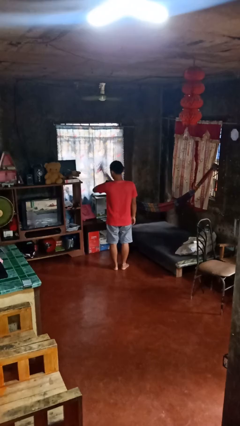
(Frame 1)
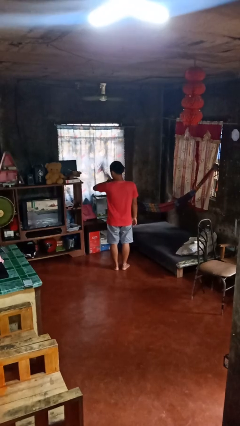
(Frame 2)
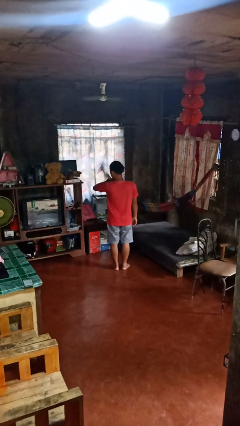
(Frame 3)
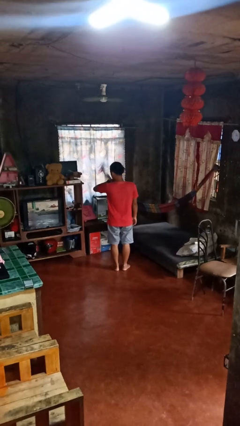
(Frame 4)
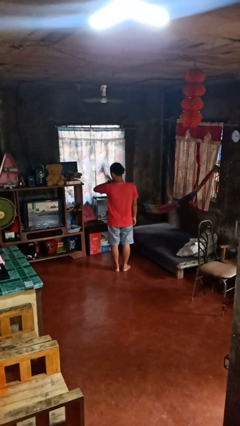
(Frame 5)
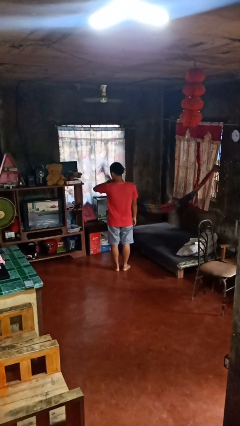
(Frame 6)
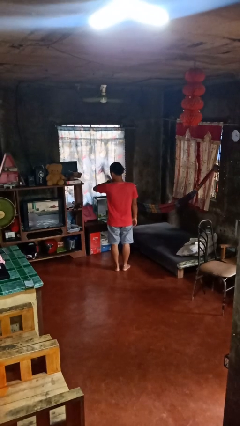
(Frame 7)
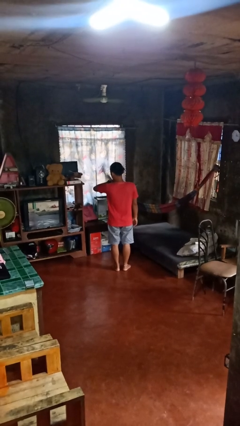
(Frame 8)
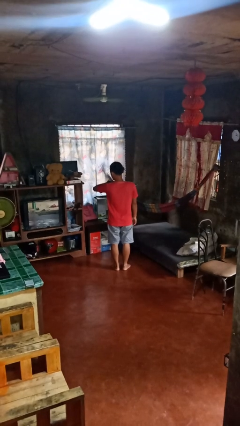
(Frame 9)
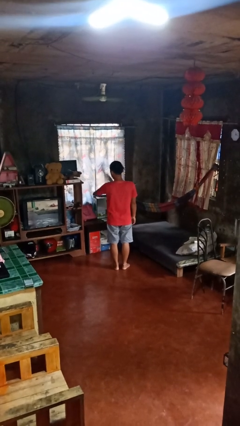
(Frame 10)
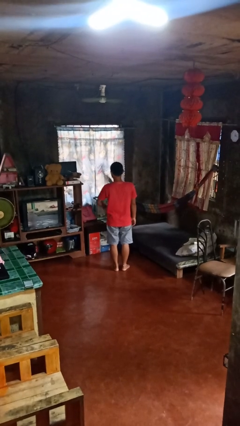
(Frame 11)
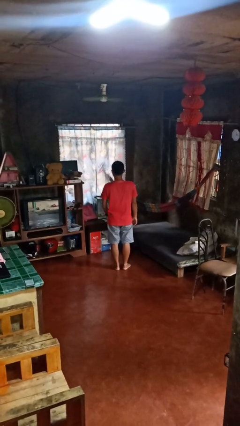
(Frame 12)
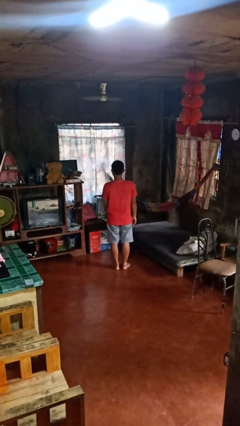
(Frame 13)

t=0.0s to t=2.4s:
person looks at wristwatch

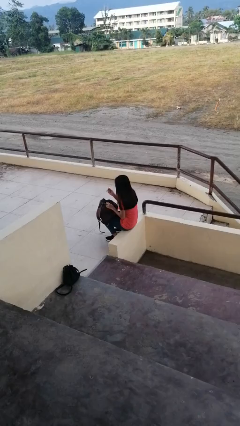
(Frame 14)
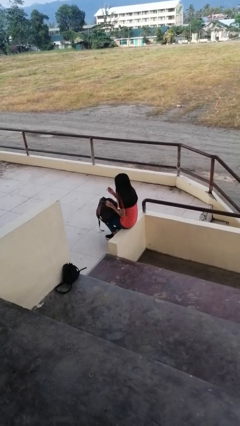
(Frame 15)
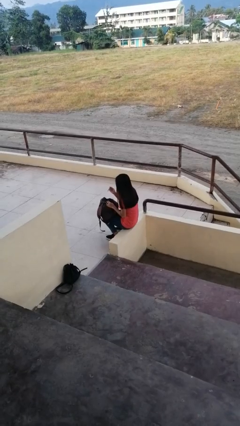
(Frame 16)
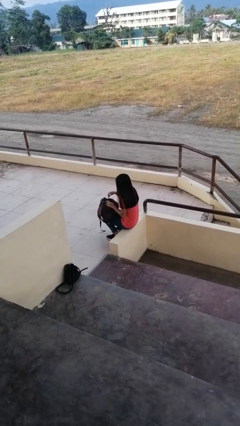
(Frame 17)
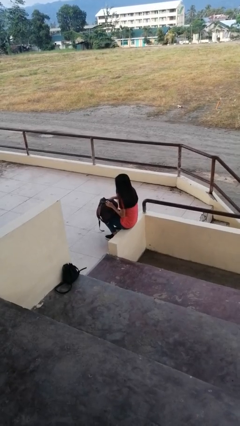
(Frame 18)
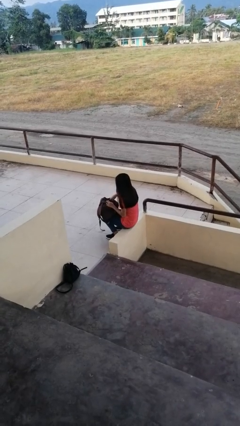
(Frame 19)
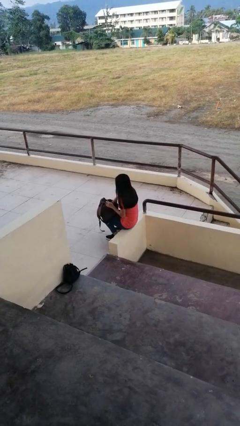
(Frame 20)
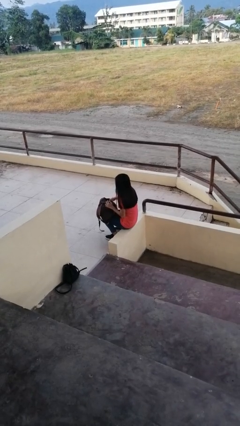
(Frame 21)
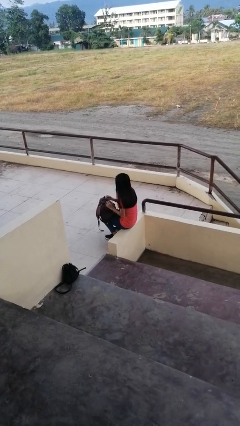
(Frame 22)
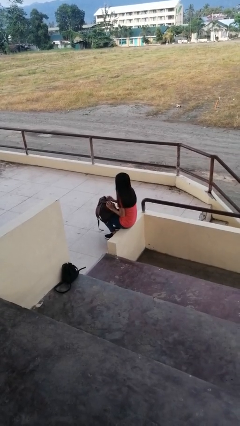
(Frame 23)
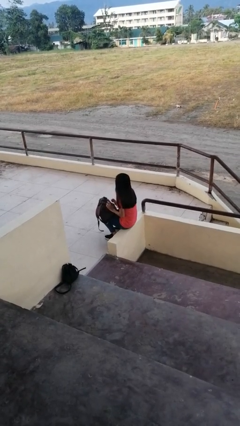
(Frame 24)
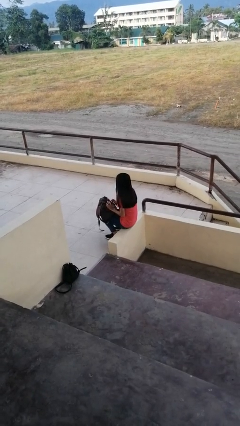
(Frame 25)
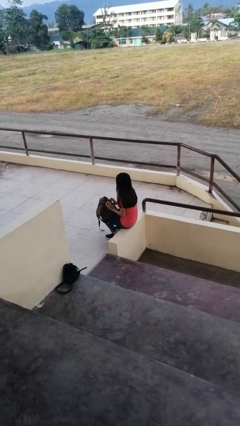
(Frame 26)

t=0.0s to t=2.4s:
person puts object into backpack

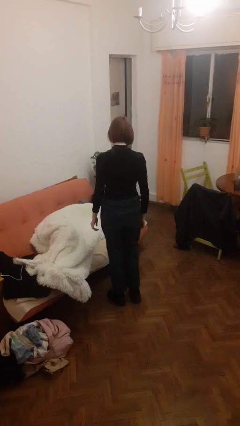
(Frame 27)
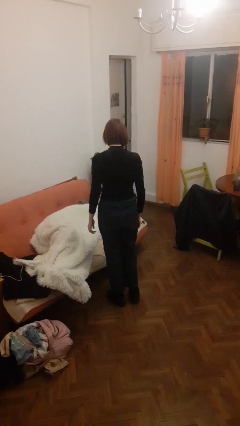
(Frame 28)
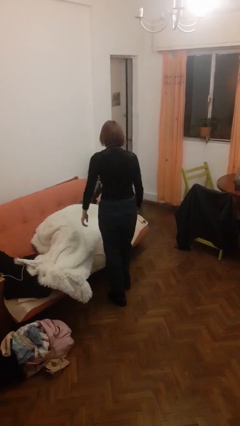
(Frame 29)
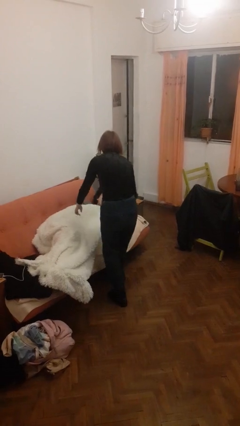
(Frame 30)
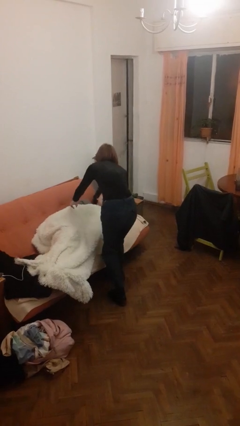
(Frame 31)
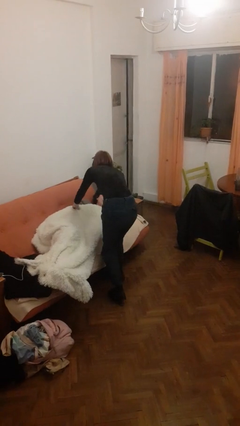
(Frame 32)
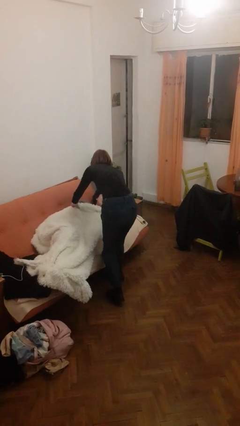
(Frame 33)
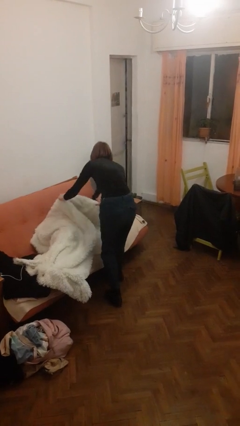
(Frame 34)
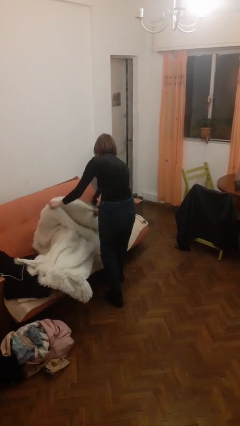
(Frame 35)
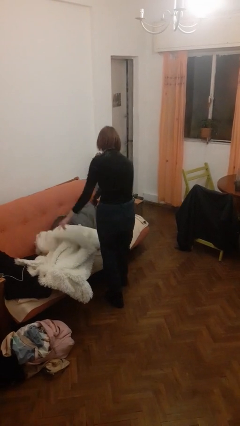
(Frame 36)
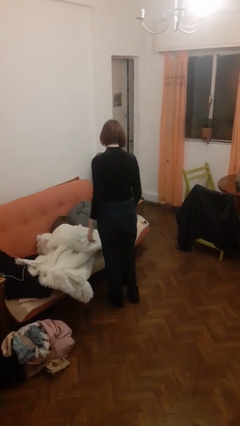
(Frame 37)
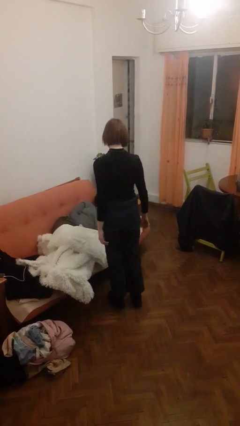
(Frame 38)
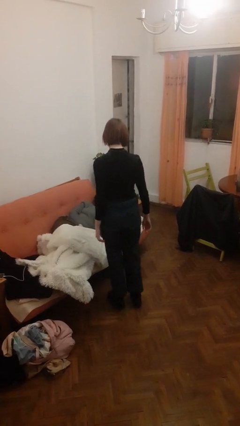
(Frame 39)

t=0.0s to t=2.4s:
person uncovers friend with blanket

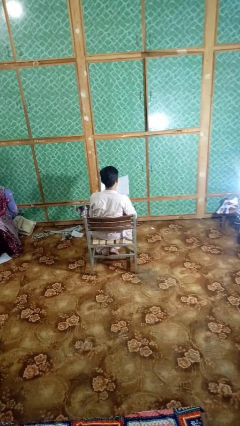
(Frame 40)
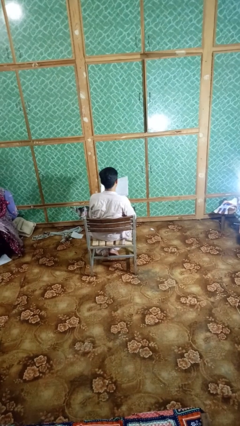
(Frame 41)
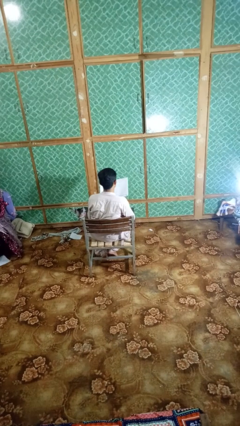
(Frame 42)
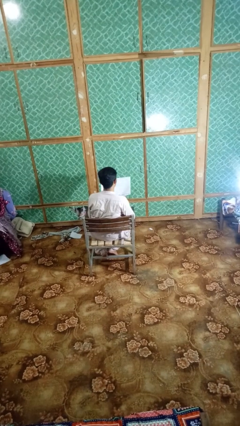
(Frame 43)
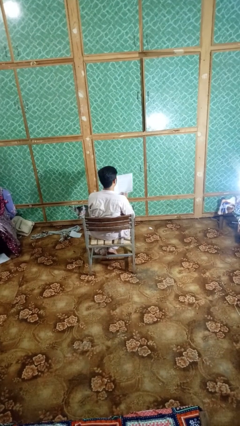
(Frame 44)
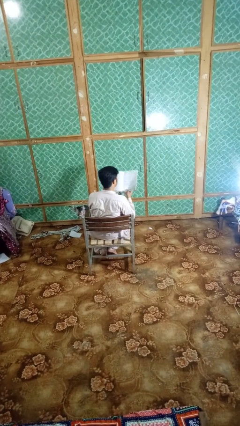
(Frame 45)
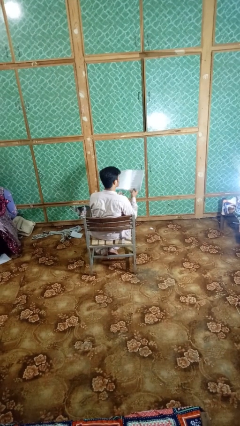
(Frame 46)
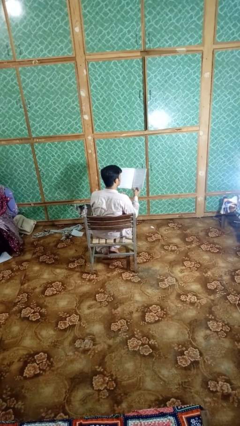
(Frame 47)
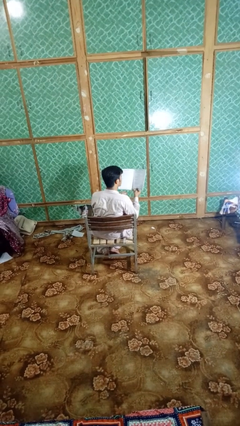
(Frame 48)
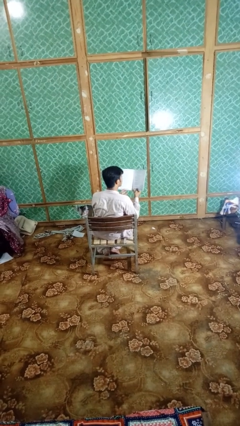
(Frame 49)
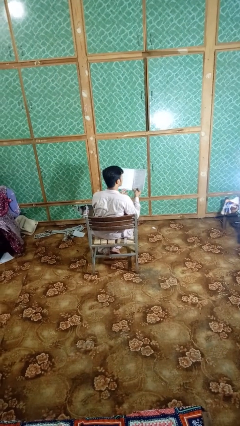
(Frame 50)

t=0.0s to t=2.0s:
person reads magazine

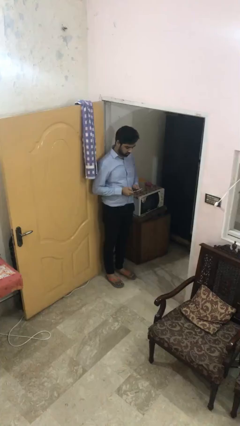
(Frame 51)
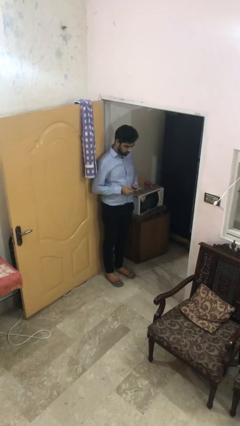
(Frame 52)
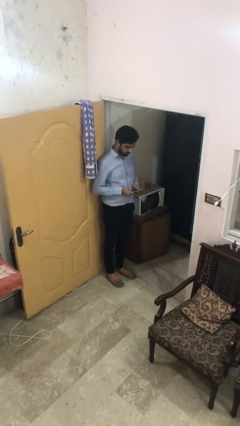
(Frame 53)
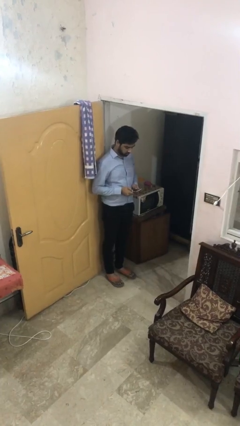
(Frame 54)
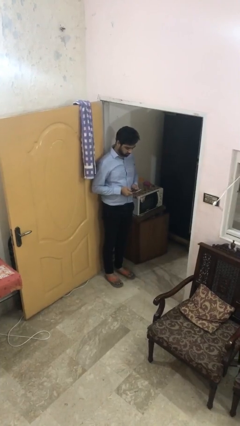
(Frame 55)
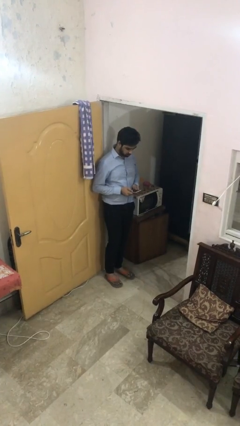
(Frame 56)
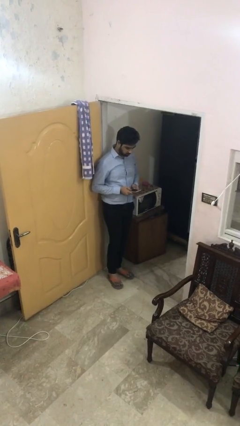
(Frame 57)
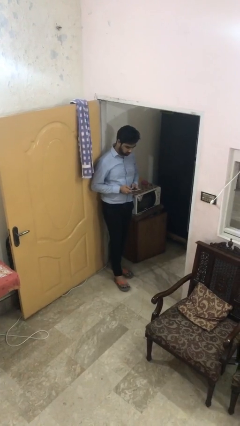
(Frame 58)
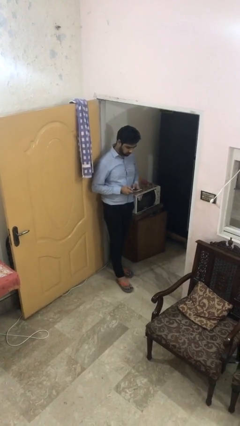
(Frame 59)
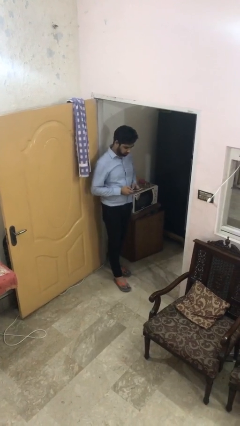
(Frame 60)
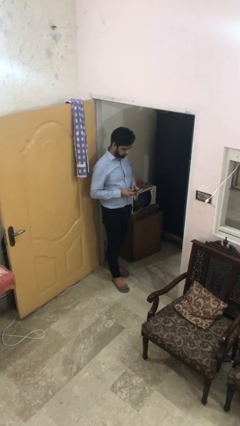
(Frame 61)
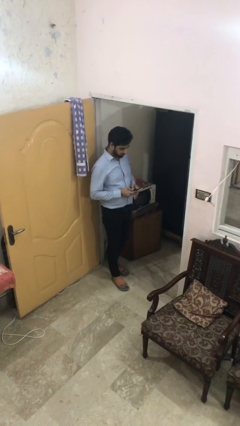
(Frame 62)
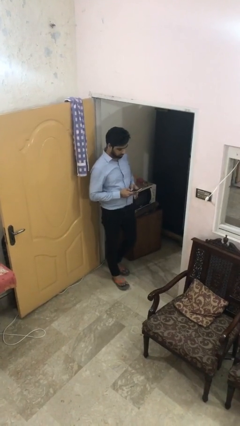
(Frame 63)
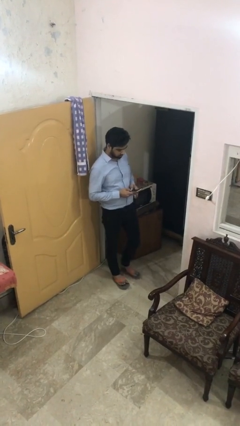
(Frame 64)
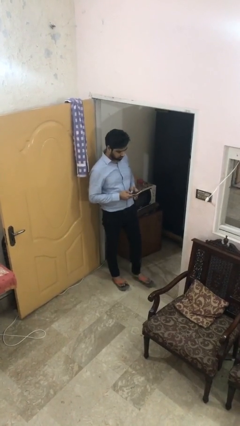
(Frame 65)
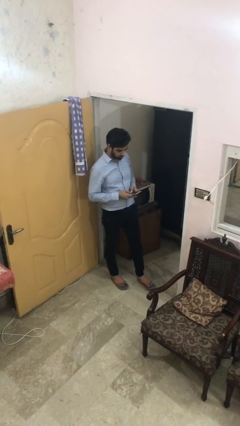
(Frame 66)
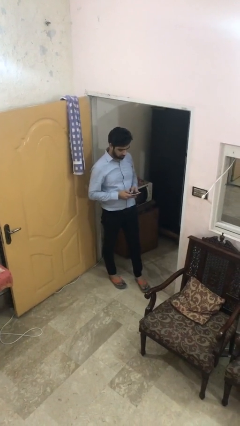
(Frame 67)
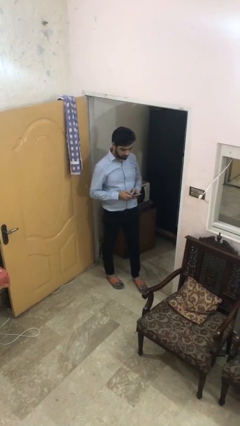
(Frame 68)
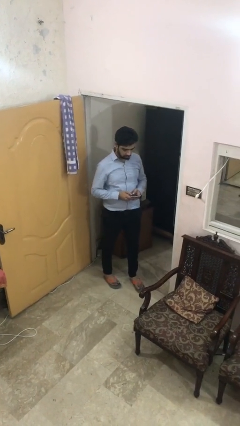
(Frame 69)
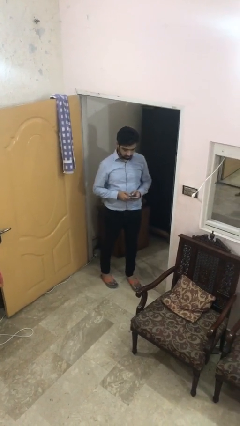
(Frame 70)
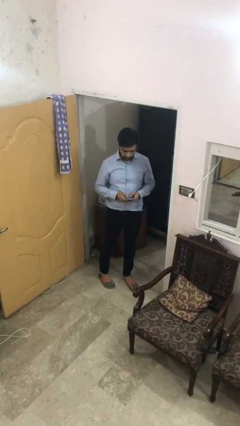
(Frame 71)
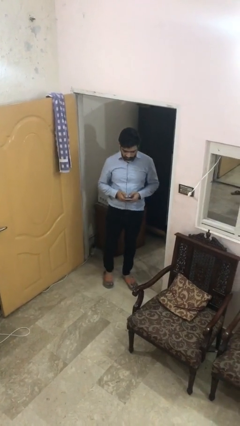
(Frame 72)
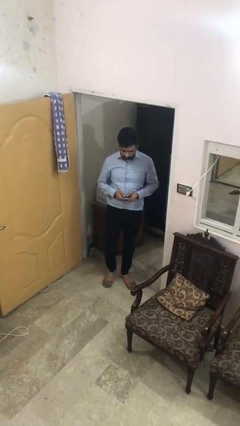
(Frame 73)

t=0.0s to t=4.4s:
person texts on phone

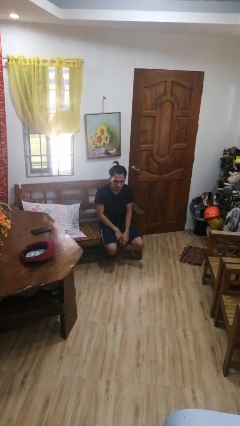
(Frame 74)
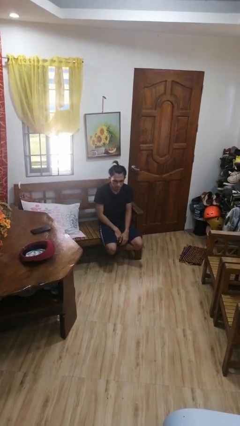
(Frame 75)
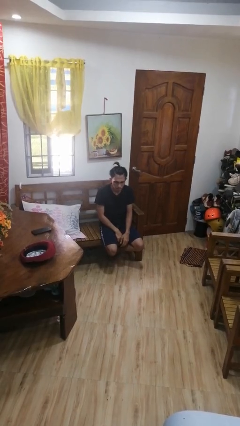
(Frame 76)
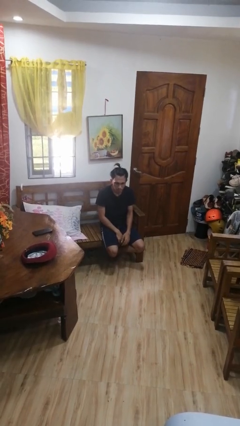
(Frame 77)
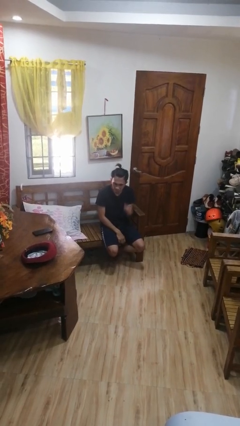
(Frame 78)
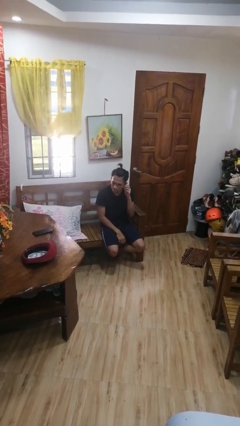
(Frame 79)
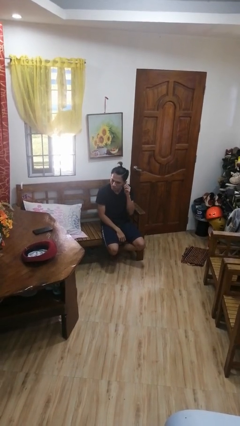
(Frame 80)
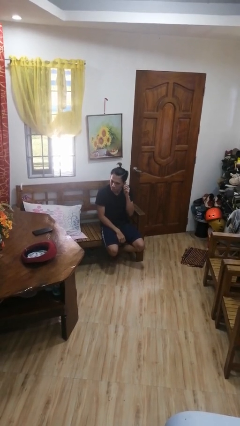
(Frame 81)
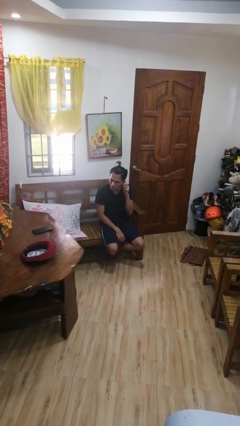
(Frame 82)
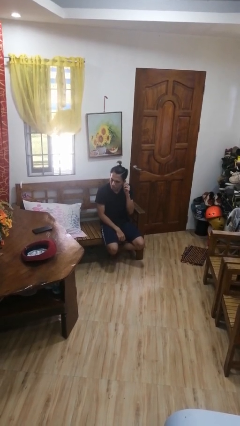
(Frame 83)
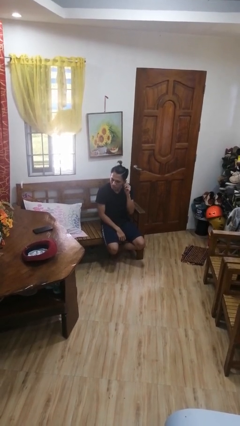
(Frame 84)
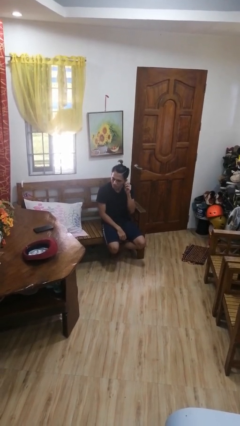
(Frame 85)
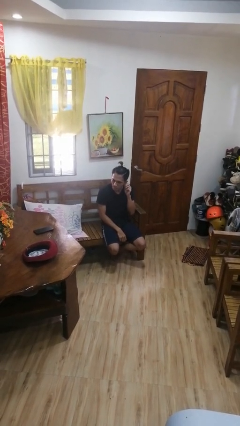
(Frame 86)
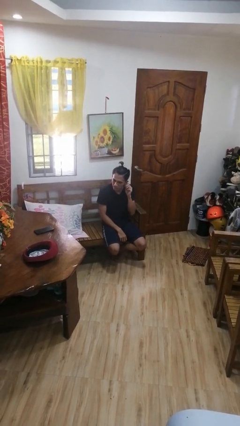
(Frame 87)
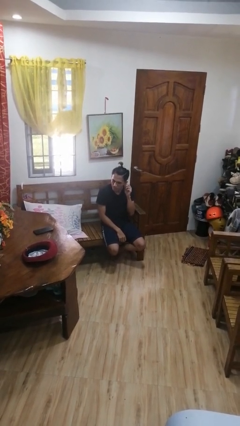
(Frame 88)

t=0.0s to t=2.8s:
person touches earlobe

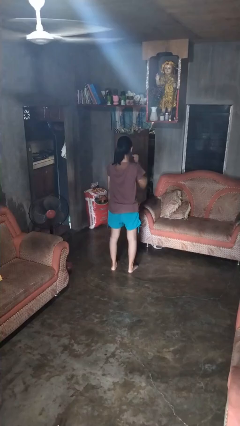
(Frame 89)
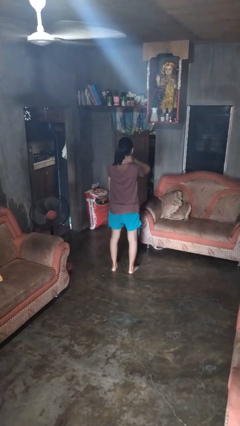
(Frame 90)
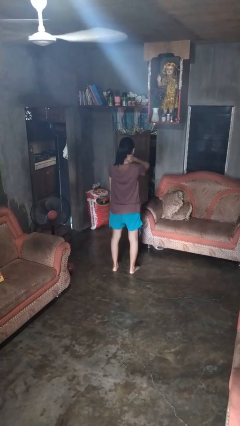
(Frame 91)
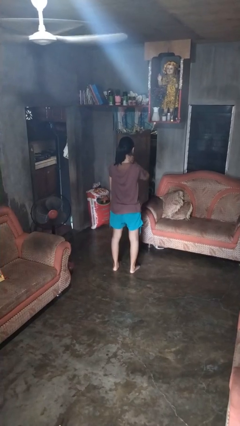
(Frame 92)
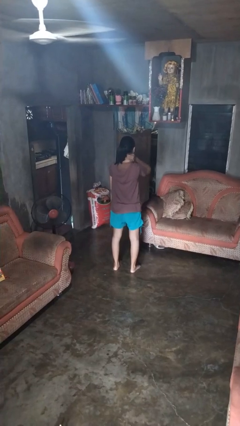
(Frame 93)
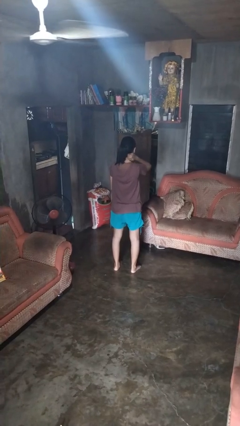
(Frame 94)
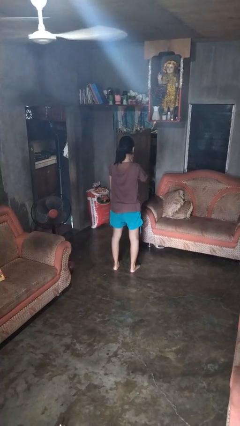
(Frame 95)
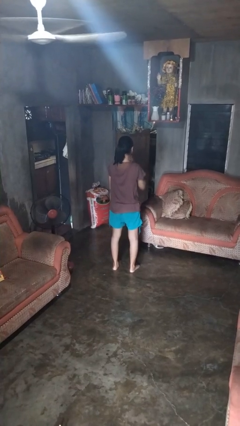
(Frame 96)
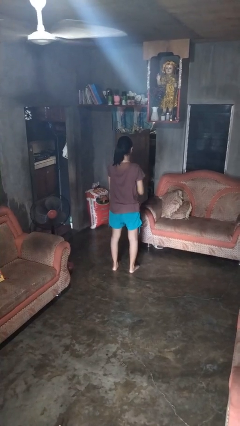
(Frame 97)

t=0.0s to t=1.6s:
person rubs neck
